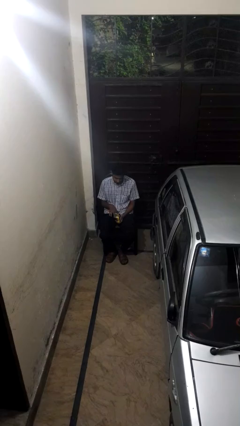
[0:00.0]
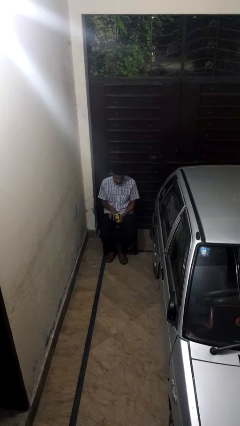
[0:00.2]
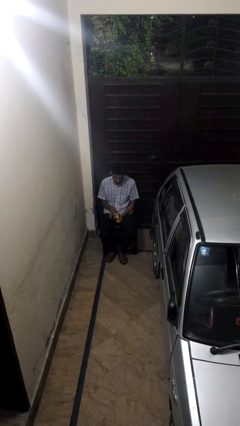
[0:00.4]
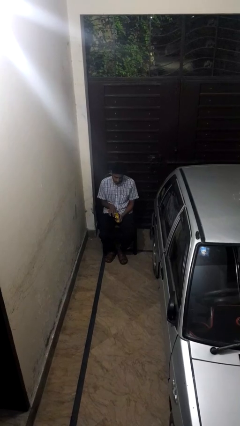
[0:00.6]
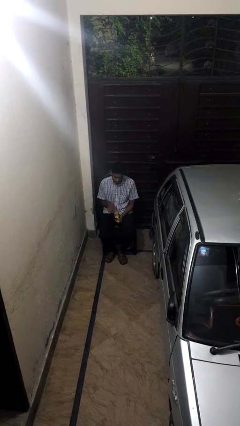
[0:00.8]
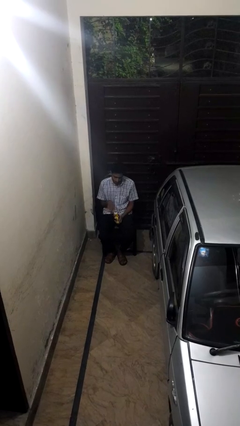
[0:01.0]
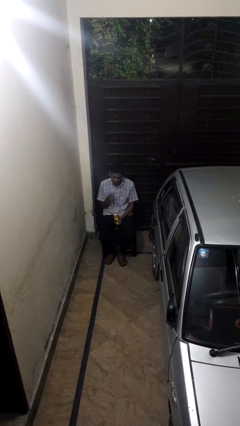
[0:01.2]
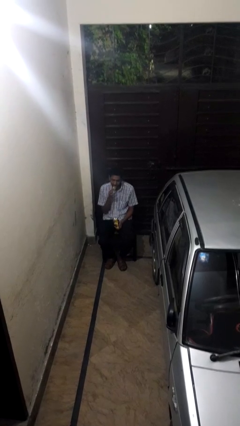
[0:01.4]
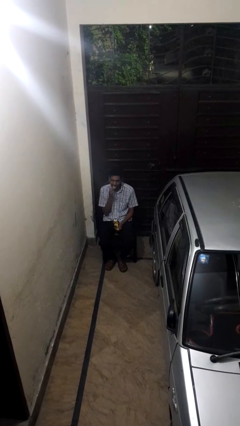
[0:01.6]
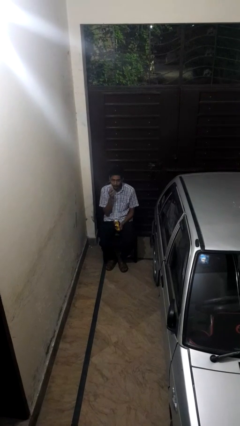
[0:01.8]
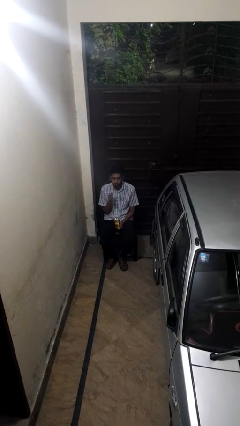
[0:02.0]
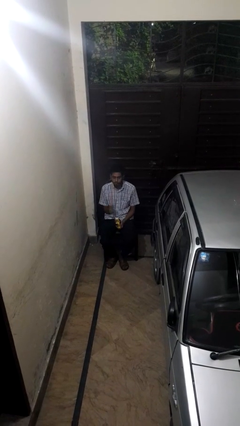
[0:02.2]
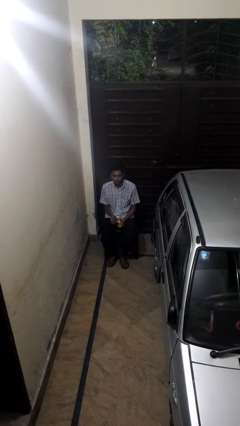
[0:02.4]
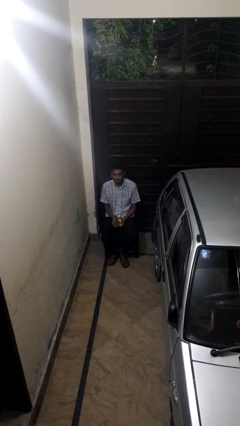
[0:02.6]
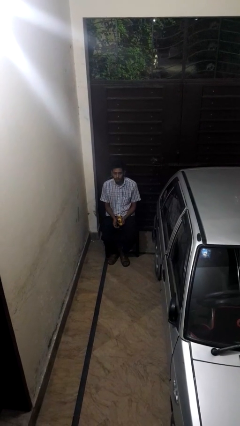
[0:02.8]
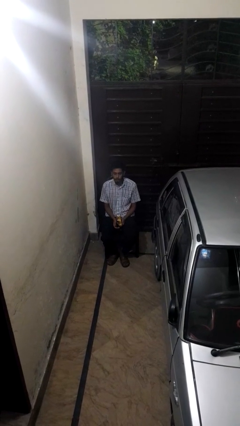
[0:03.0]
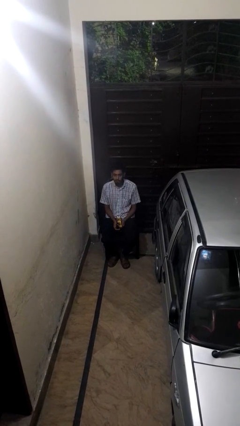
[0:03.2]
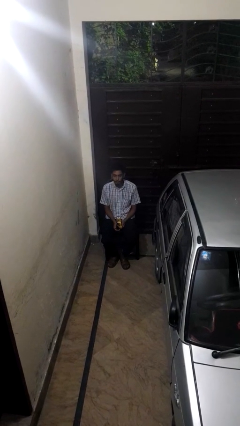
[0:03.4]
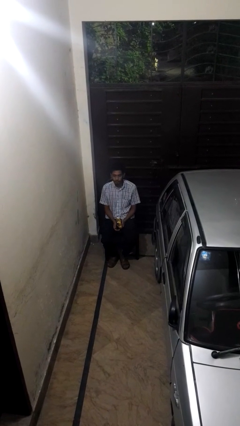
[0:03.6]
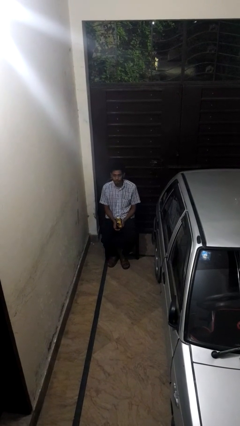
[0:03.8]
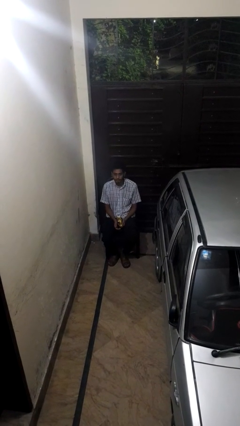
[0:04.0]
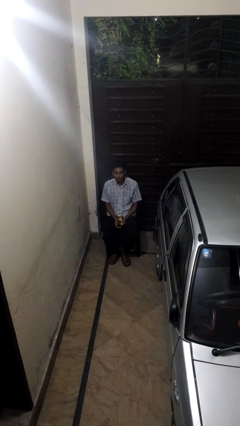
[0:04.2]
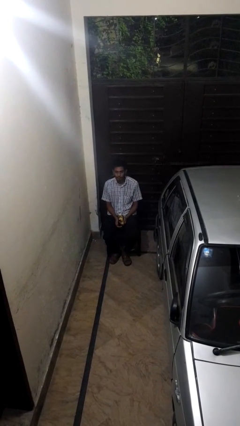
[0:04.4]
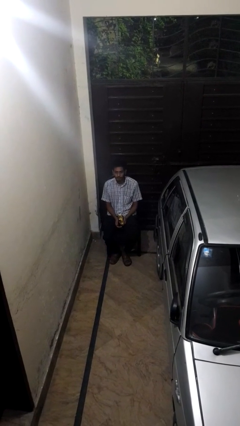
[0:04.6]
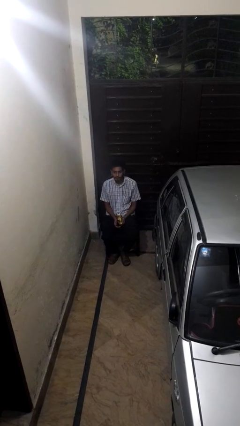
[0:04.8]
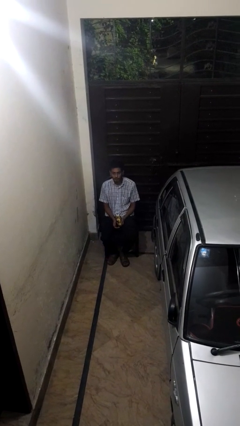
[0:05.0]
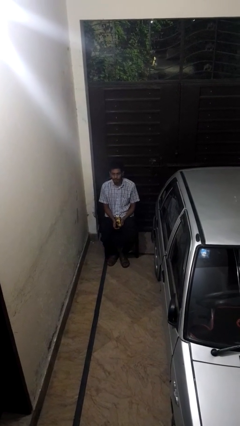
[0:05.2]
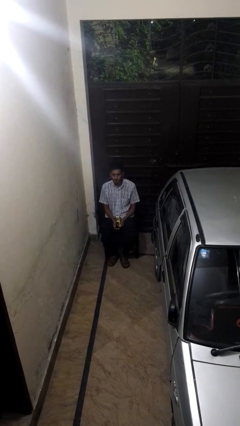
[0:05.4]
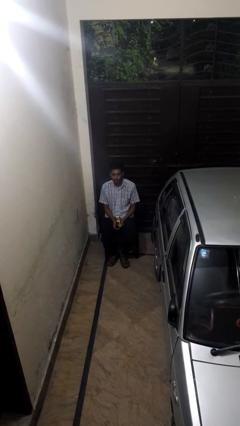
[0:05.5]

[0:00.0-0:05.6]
person eats snack from bag

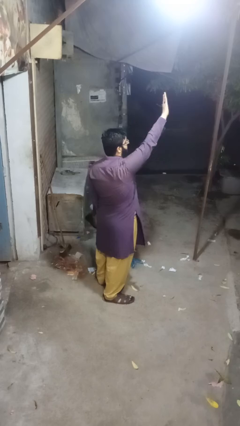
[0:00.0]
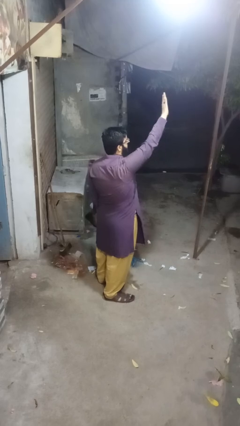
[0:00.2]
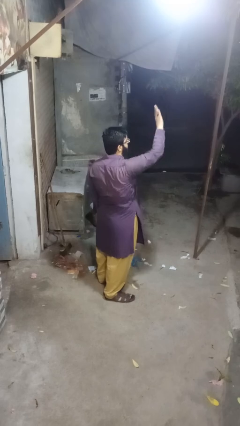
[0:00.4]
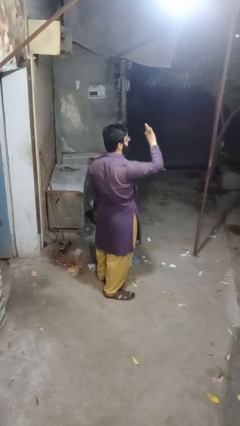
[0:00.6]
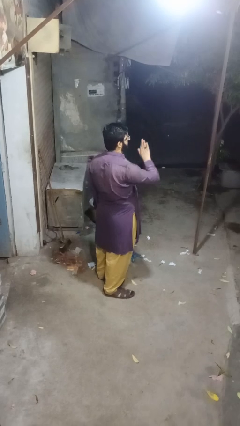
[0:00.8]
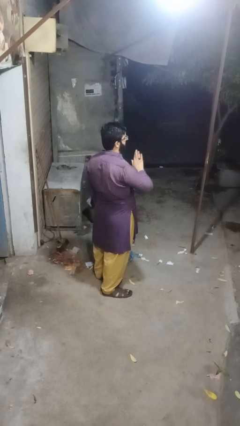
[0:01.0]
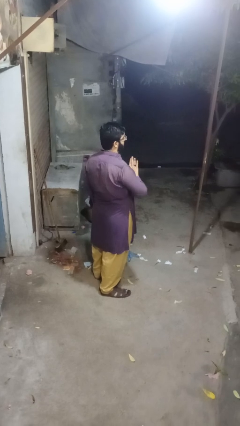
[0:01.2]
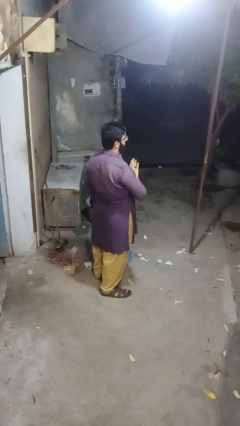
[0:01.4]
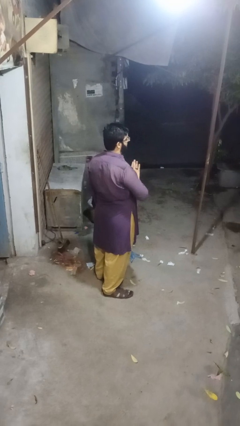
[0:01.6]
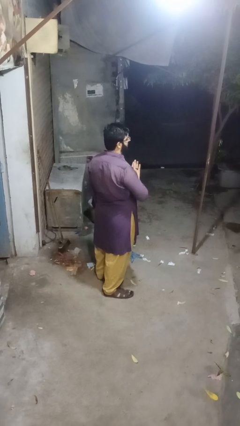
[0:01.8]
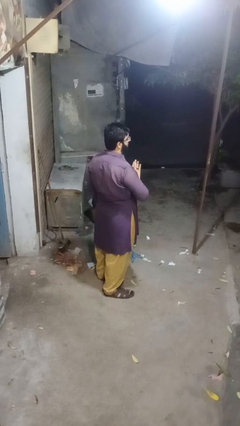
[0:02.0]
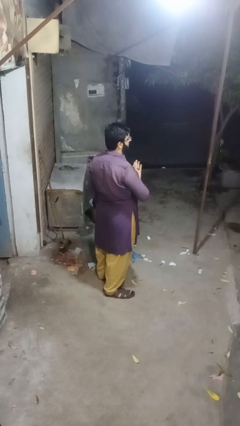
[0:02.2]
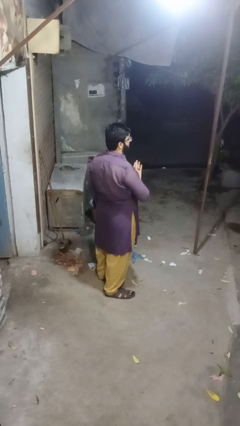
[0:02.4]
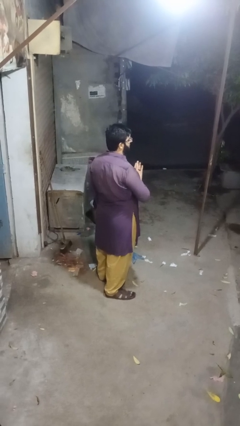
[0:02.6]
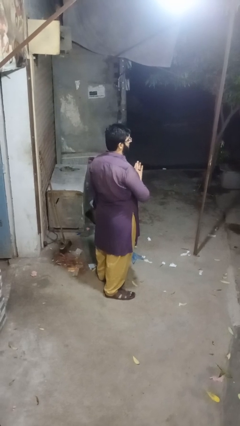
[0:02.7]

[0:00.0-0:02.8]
person gestures swipe down

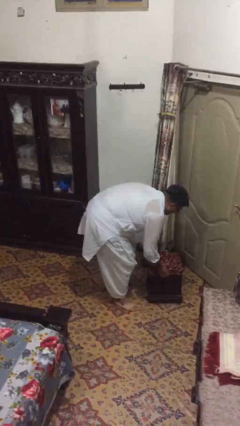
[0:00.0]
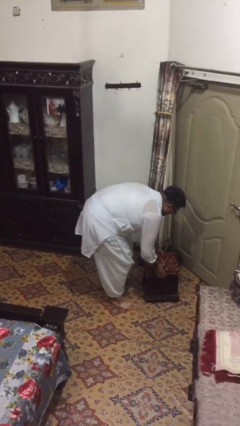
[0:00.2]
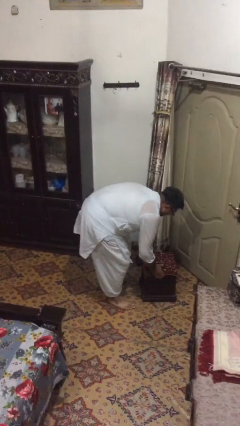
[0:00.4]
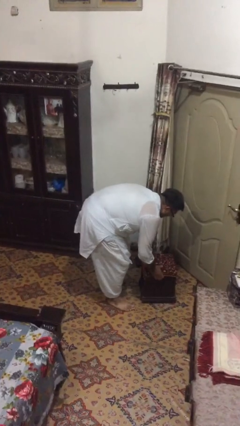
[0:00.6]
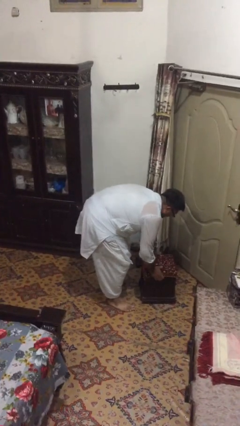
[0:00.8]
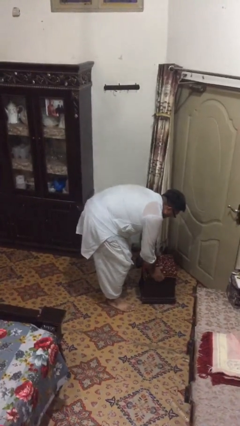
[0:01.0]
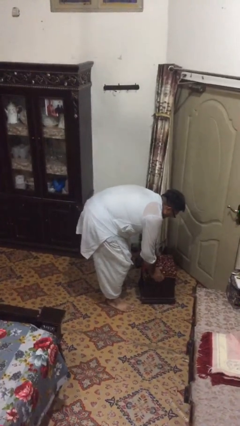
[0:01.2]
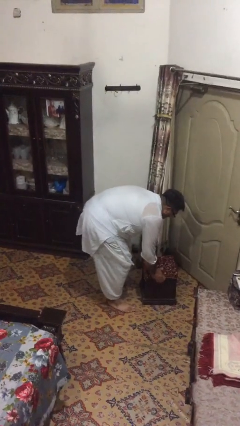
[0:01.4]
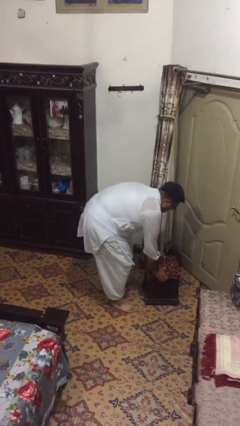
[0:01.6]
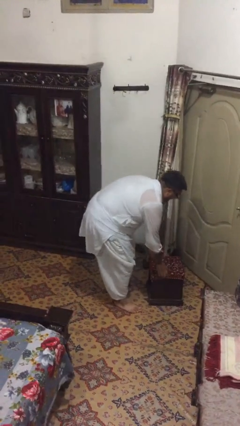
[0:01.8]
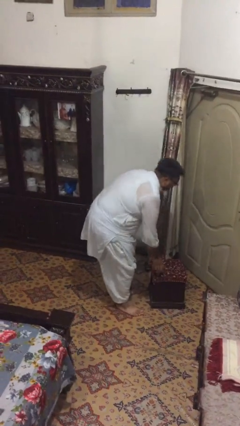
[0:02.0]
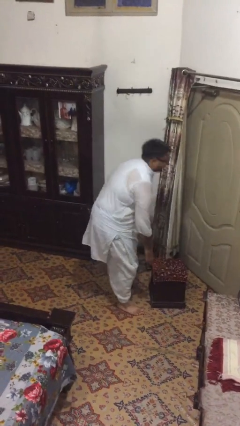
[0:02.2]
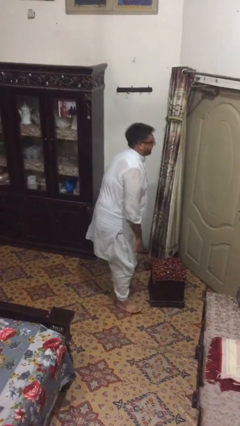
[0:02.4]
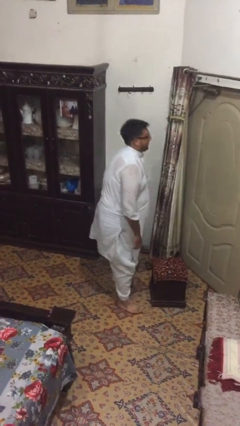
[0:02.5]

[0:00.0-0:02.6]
person puts down object on floor

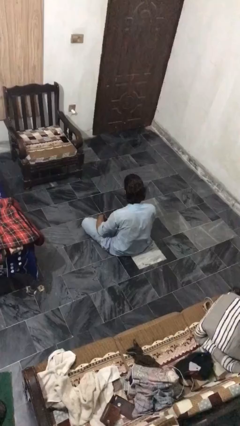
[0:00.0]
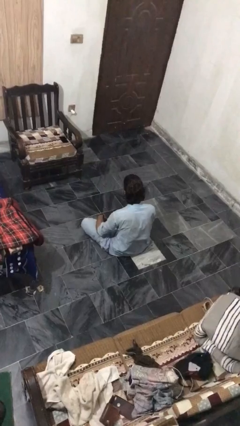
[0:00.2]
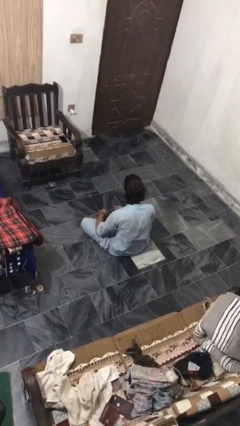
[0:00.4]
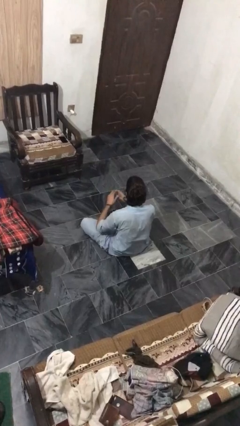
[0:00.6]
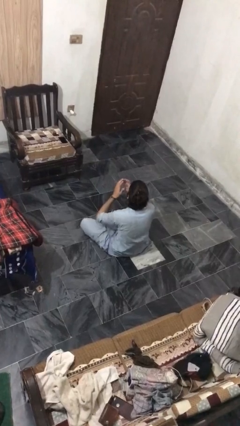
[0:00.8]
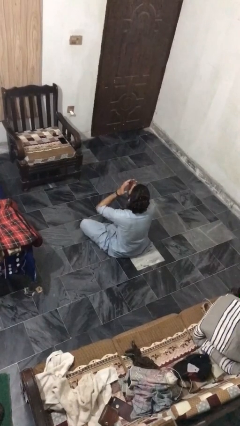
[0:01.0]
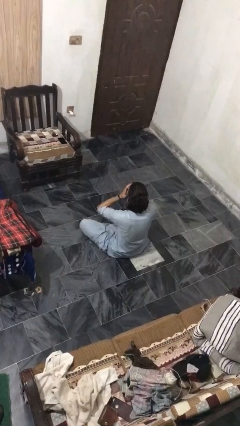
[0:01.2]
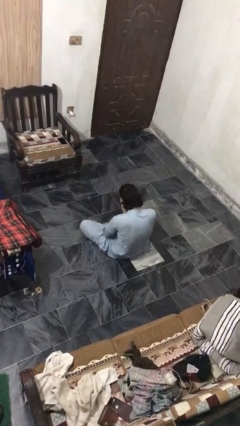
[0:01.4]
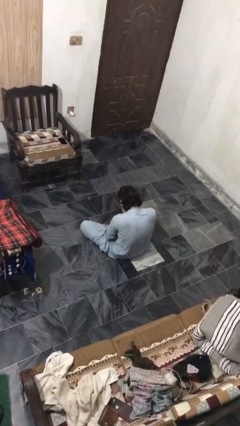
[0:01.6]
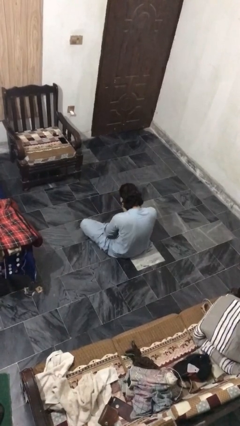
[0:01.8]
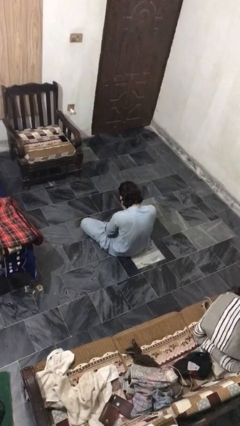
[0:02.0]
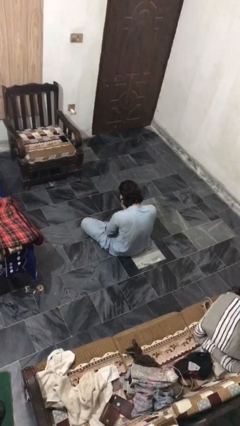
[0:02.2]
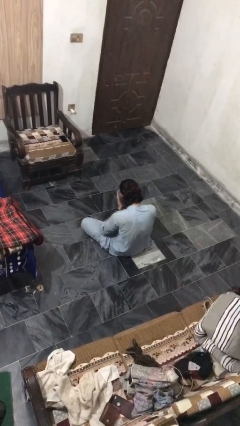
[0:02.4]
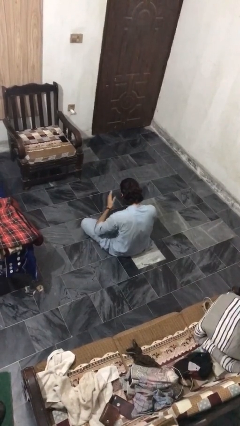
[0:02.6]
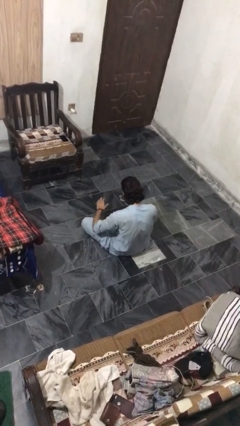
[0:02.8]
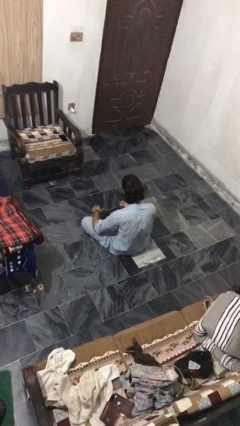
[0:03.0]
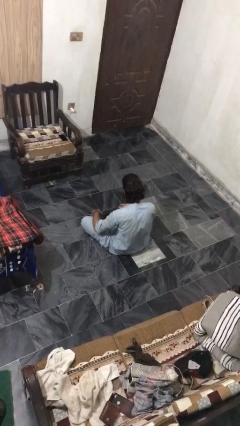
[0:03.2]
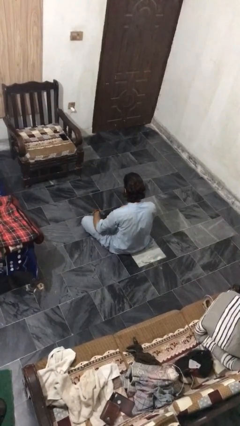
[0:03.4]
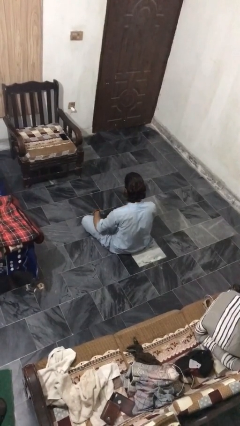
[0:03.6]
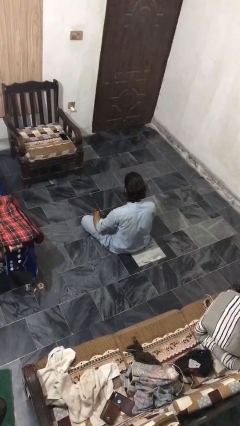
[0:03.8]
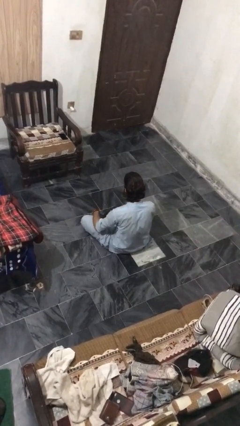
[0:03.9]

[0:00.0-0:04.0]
person sneezes into hand

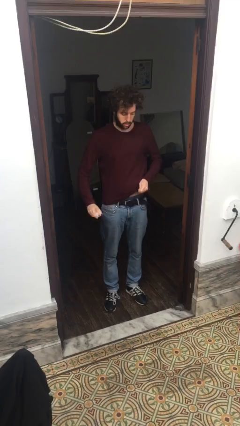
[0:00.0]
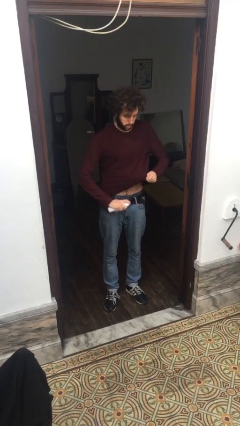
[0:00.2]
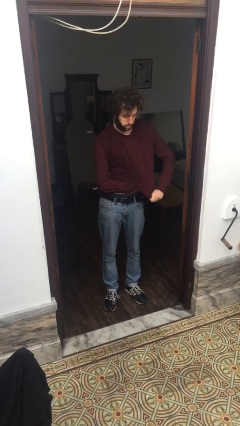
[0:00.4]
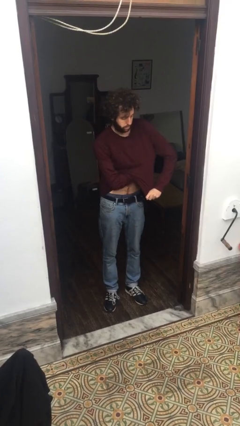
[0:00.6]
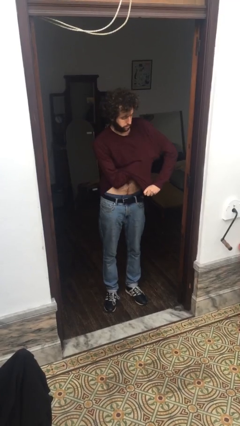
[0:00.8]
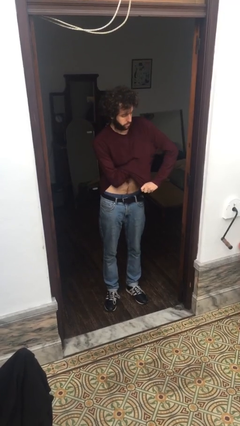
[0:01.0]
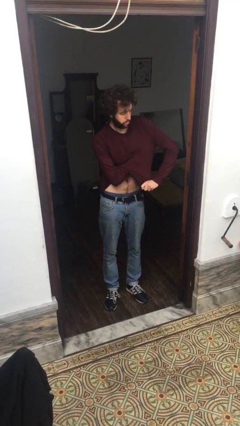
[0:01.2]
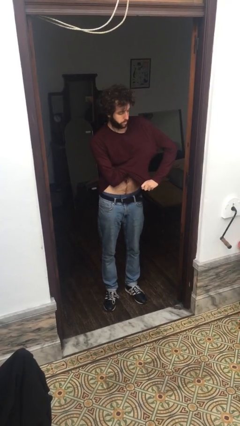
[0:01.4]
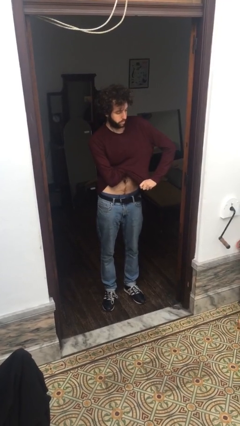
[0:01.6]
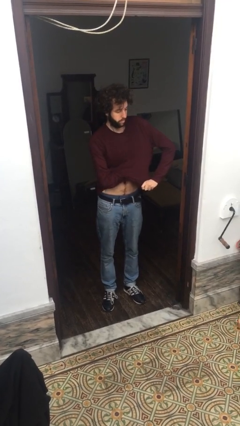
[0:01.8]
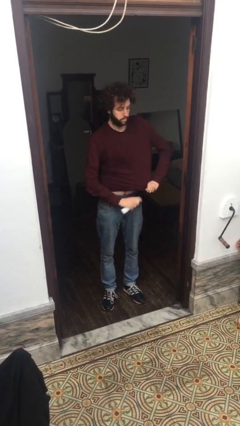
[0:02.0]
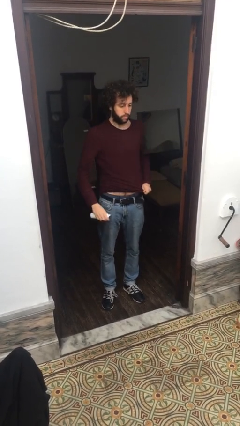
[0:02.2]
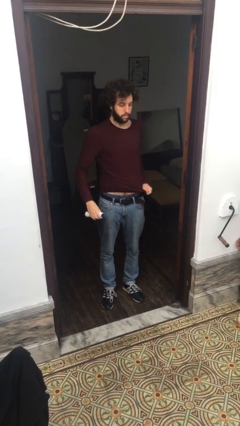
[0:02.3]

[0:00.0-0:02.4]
person applies deodorant
